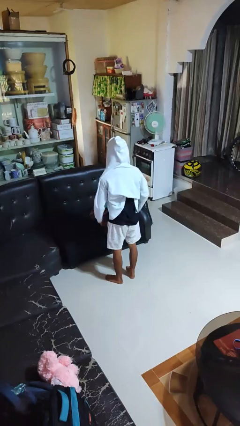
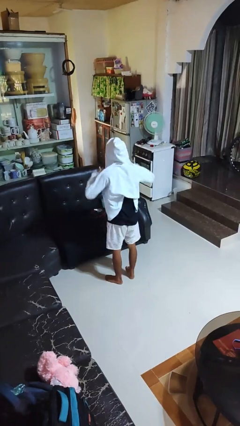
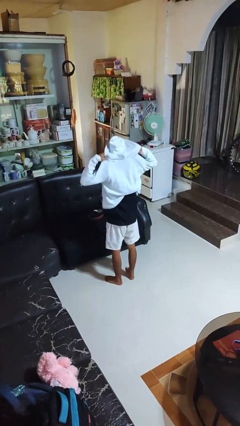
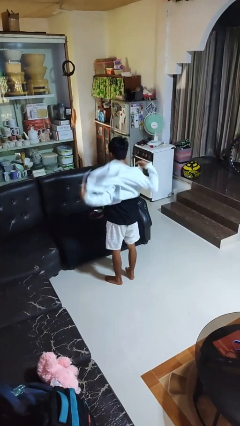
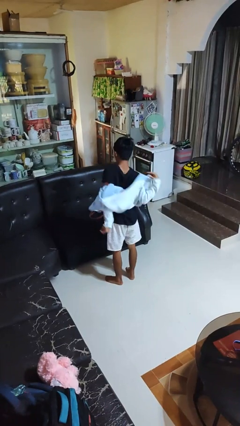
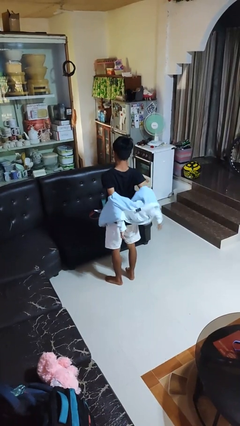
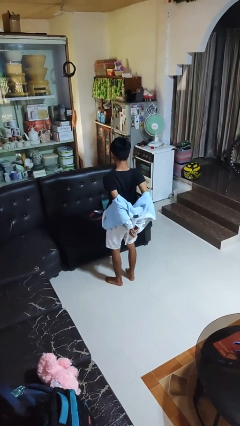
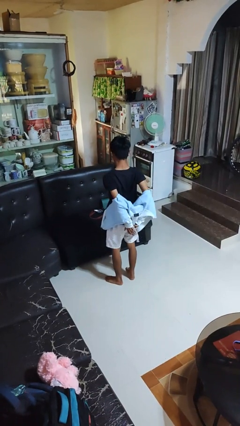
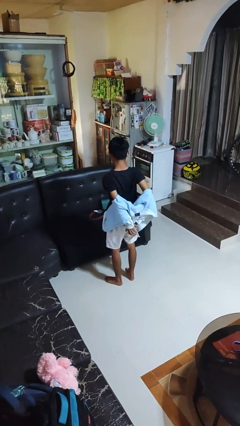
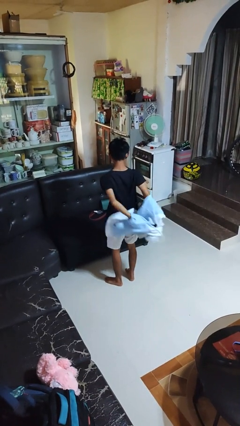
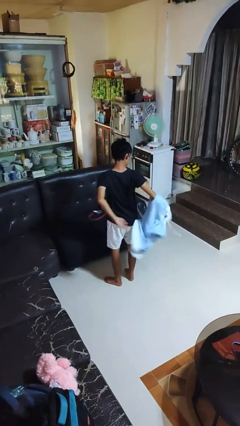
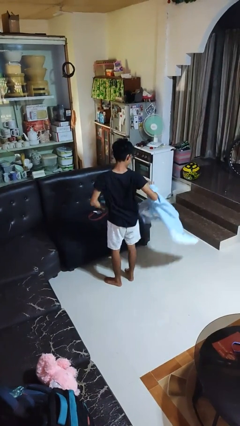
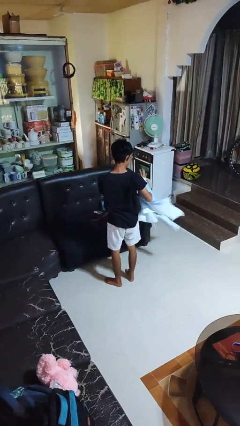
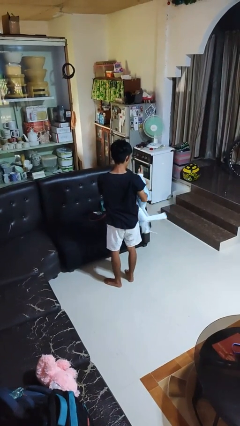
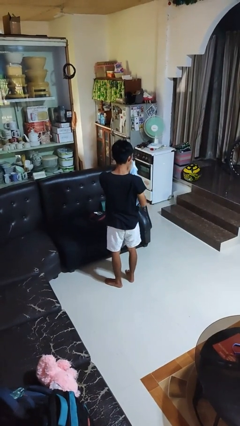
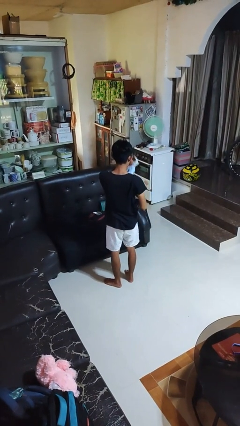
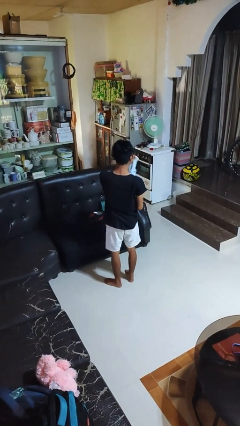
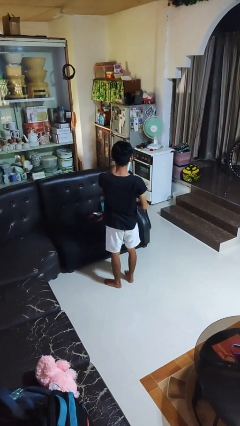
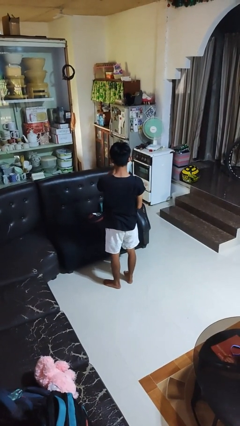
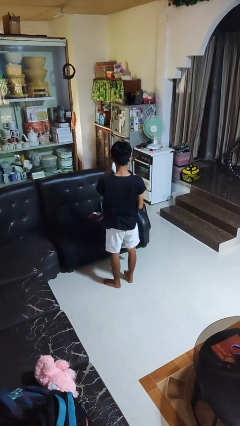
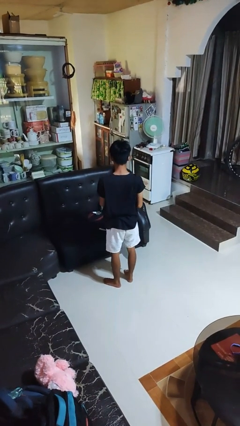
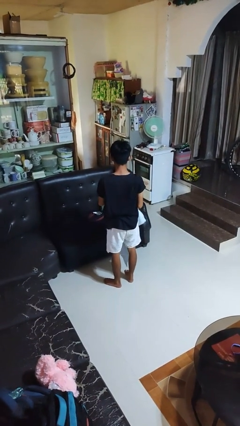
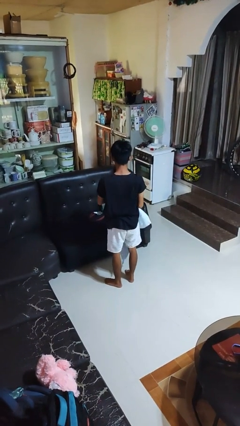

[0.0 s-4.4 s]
person takes off hoodie

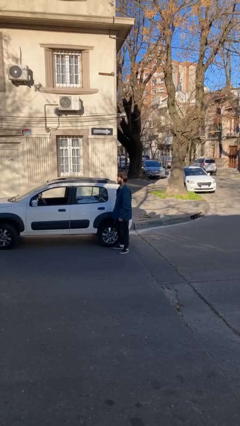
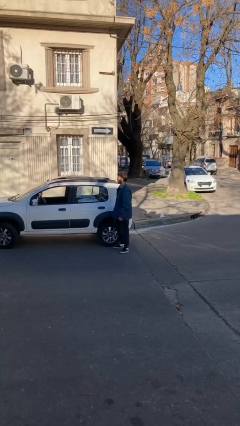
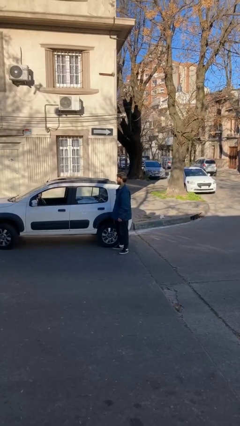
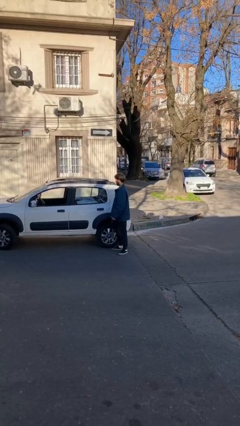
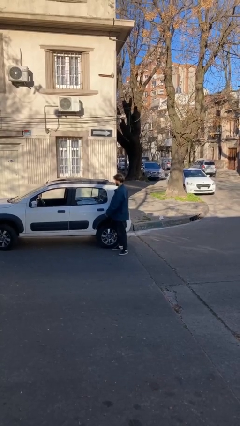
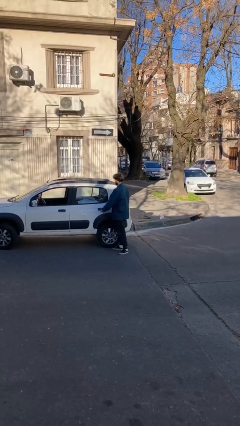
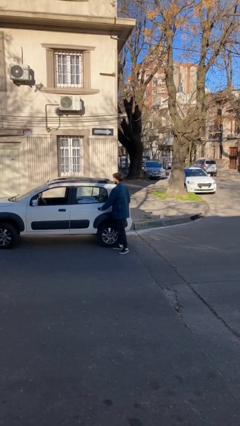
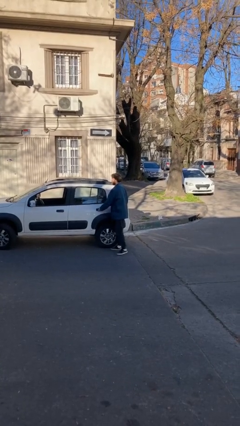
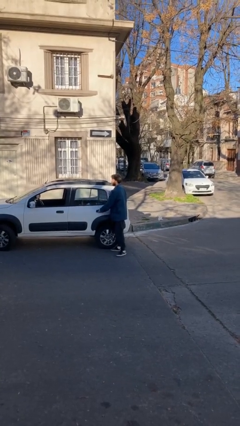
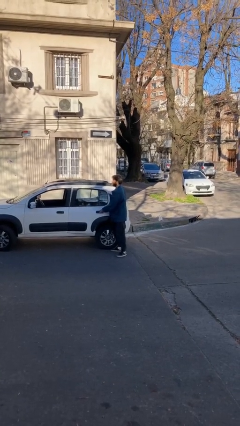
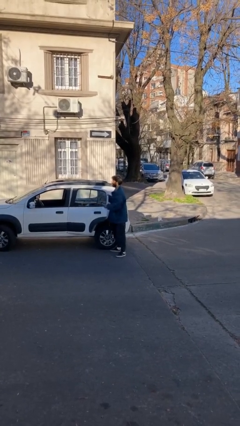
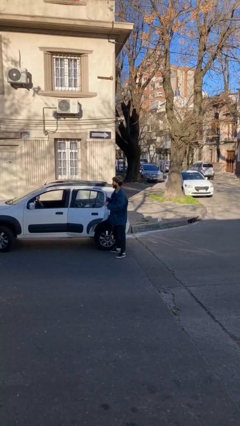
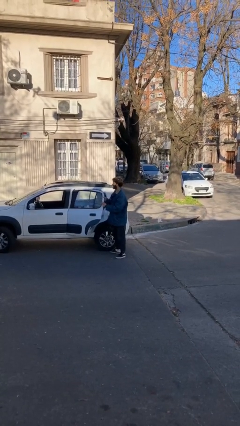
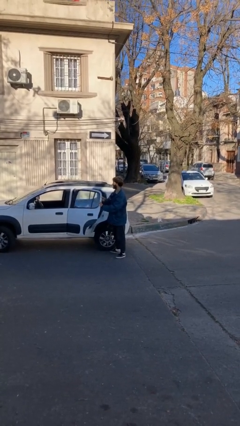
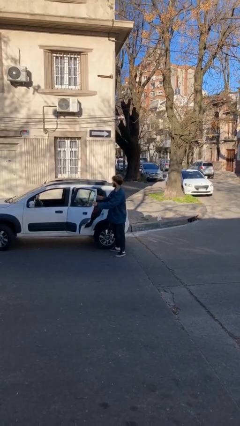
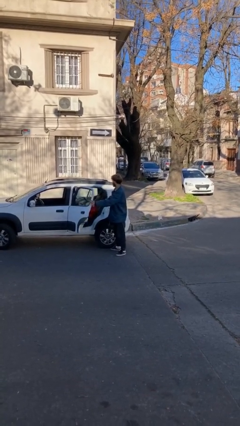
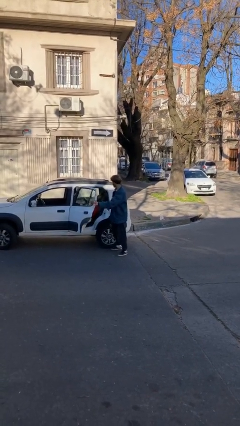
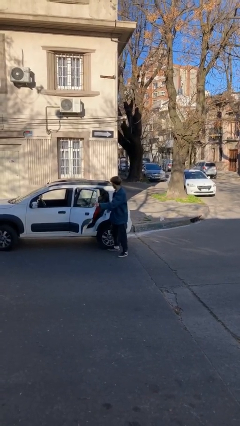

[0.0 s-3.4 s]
person opens car door

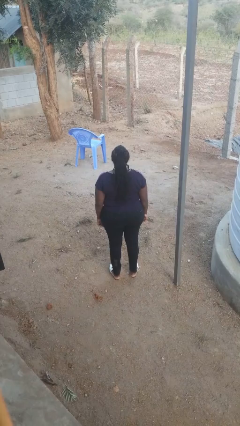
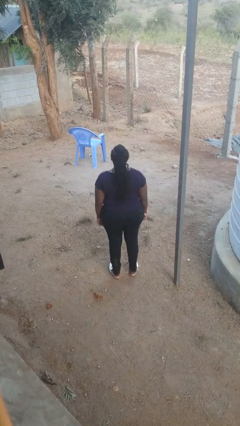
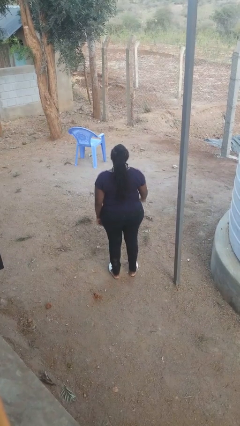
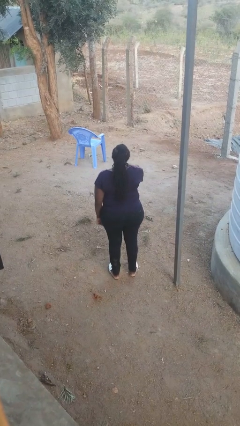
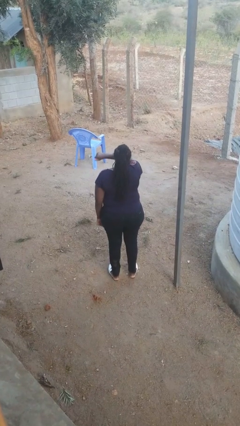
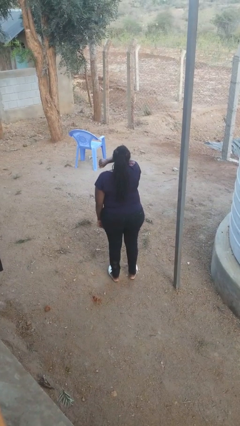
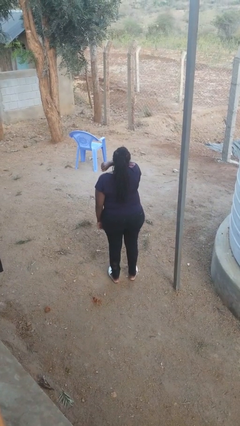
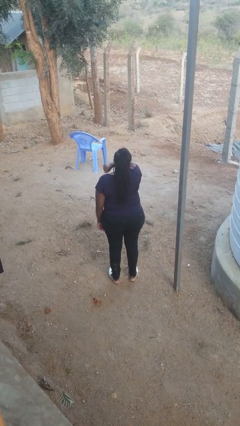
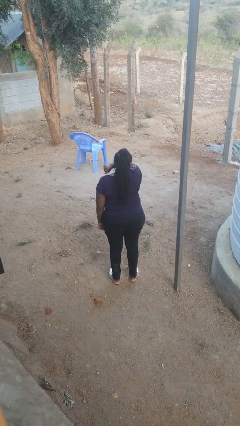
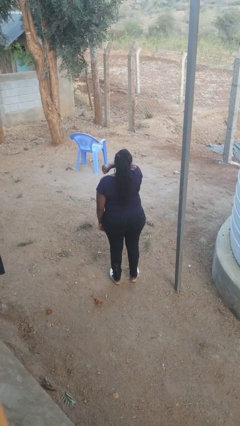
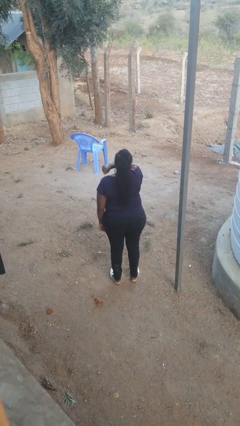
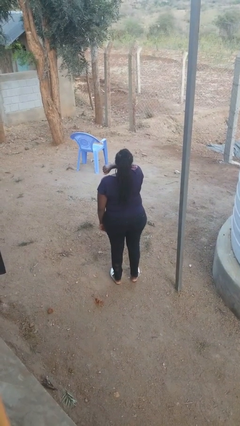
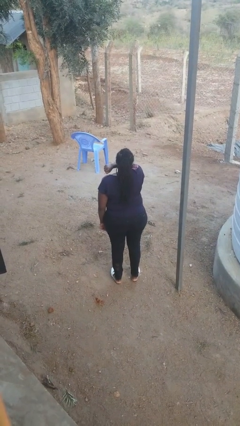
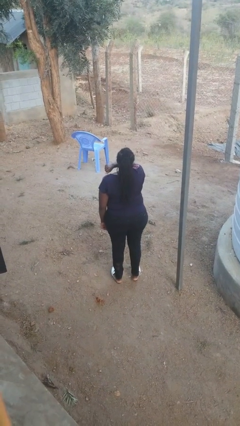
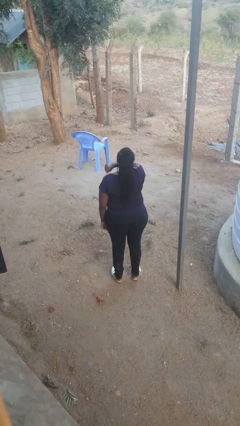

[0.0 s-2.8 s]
person sneezes into arm

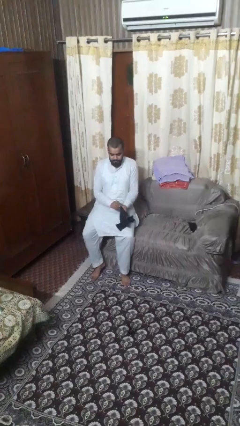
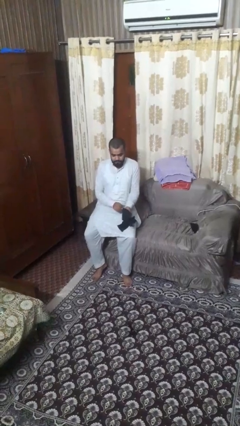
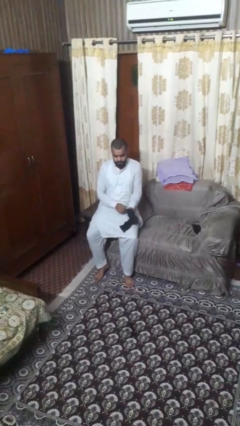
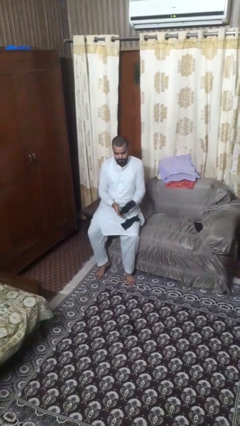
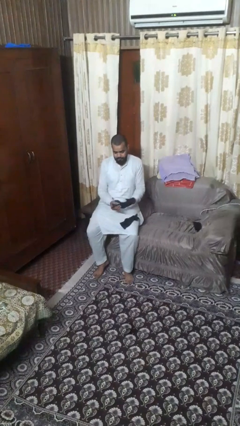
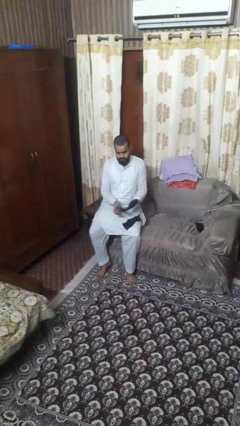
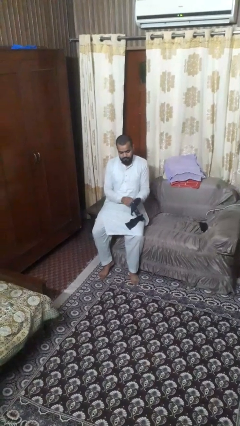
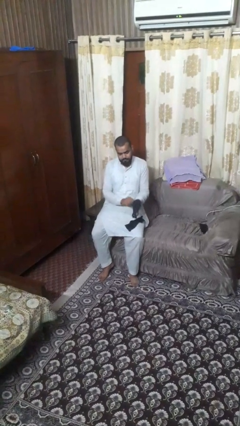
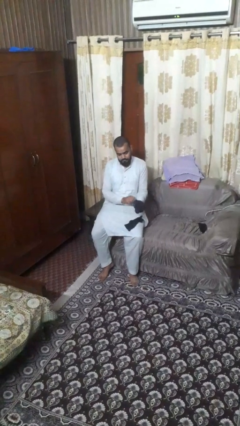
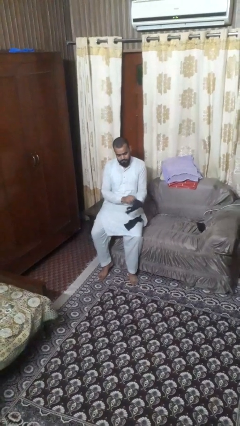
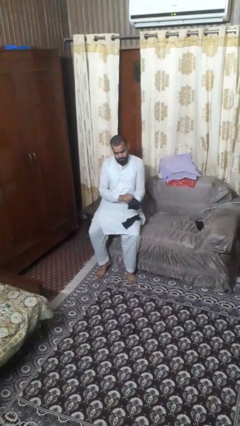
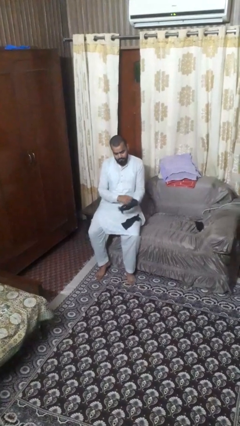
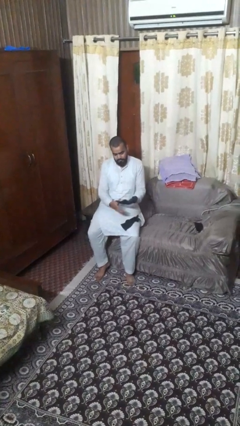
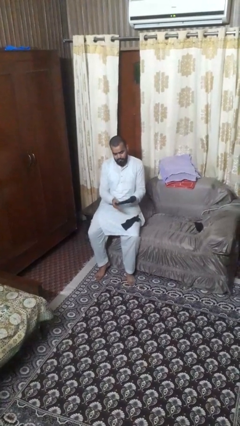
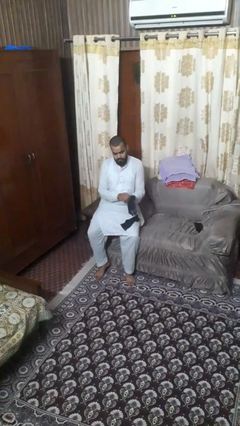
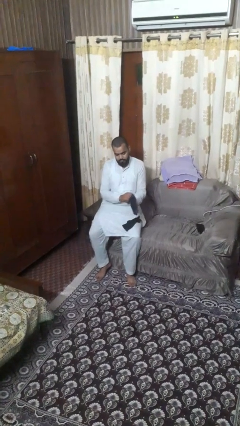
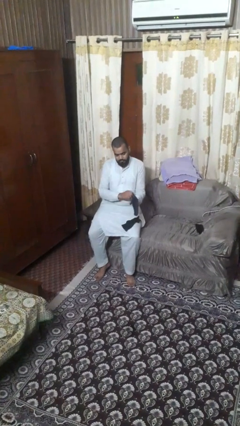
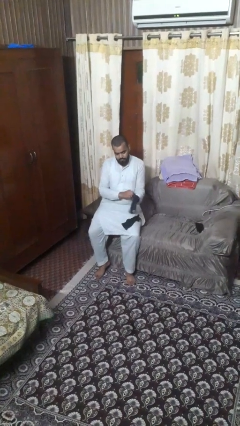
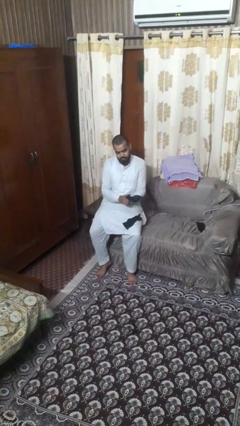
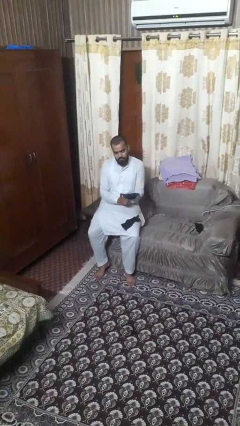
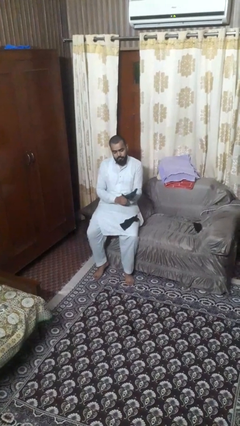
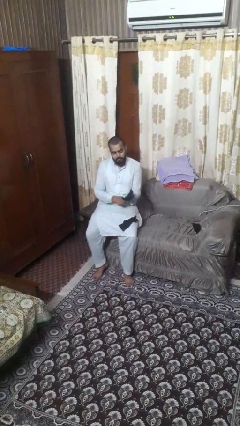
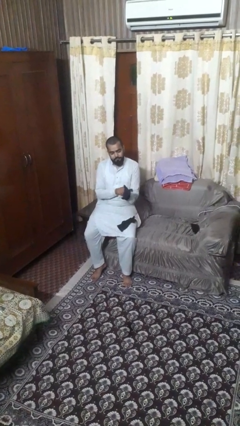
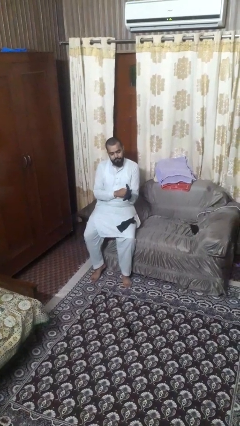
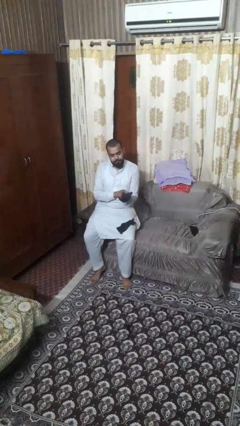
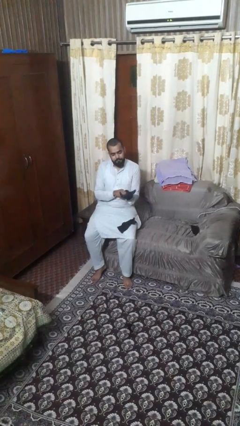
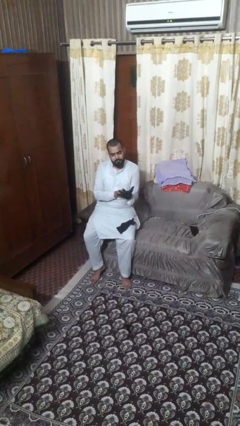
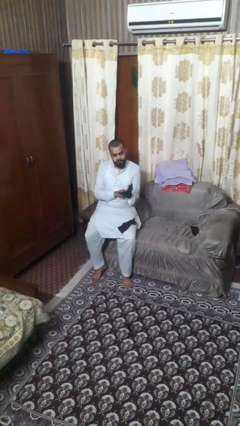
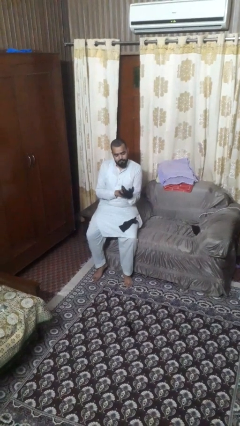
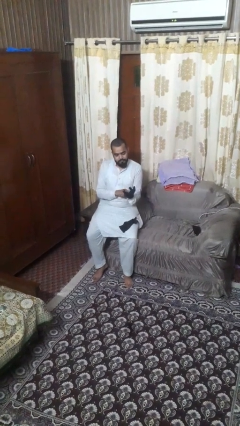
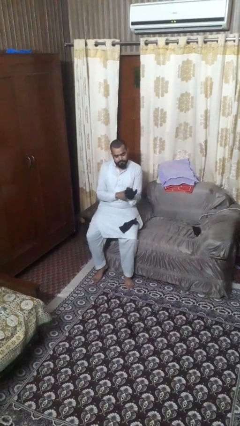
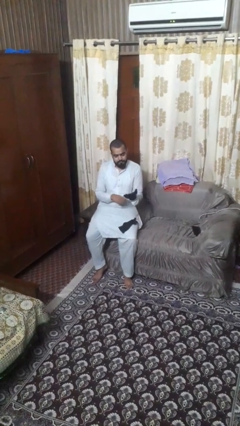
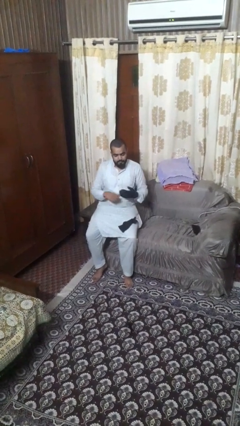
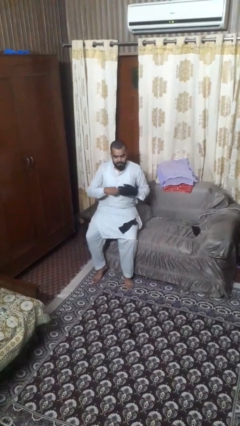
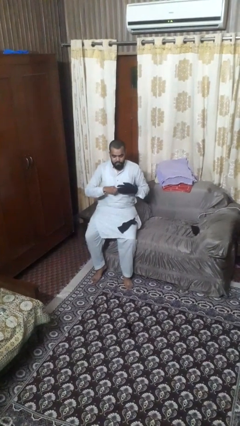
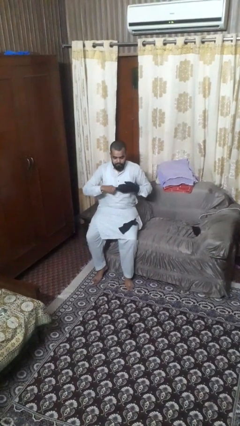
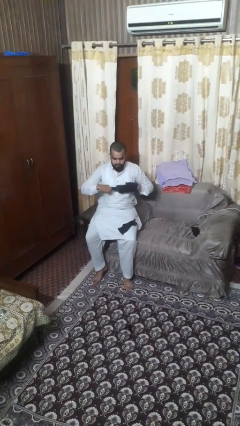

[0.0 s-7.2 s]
person puts on gloves

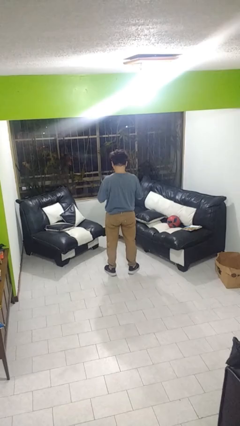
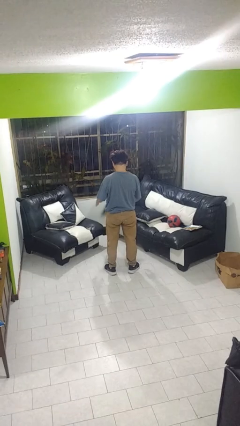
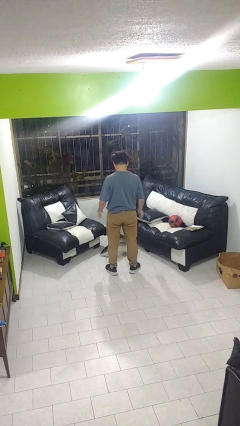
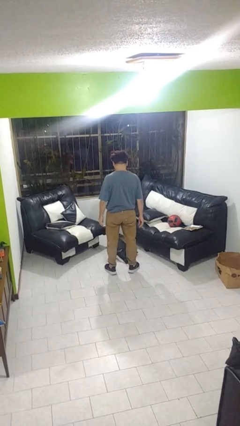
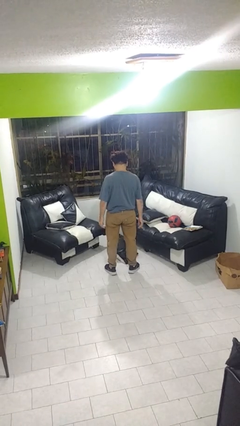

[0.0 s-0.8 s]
person drops object
